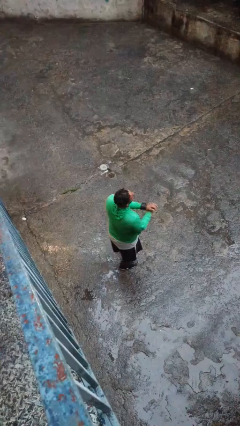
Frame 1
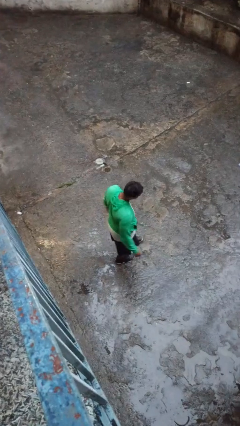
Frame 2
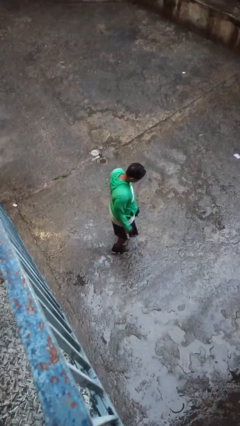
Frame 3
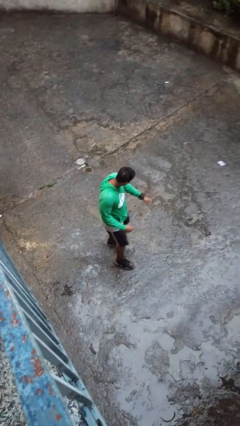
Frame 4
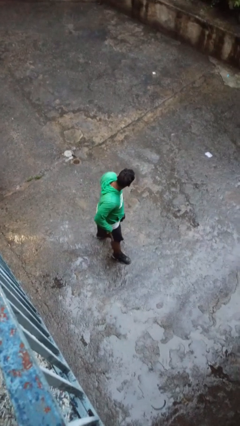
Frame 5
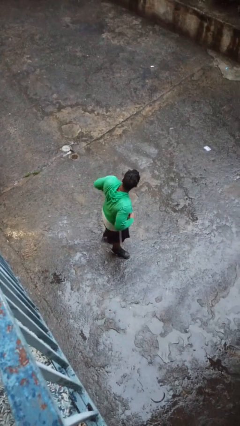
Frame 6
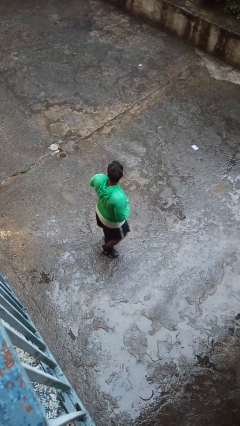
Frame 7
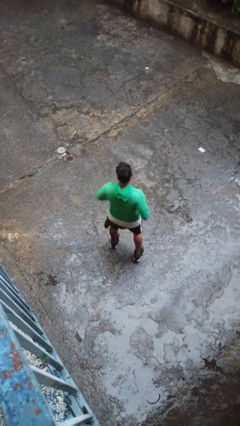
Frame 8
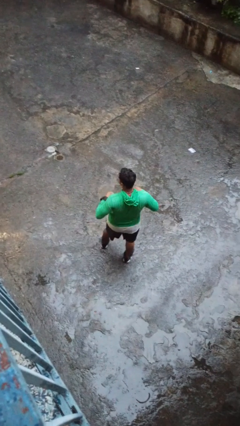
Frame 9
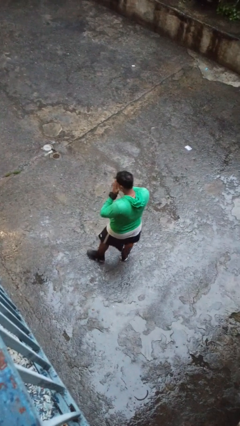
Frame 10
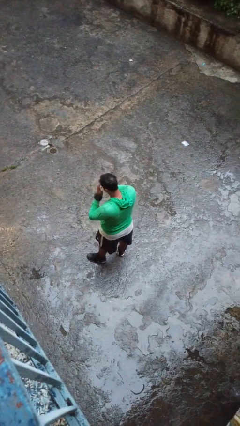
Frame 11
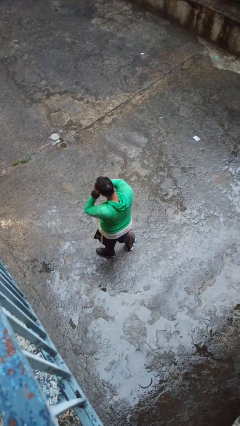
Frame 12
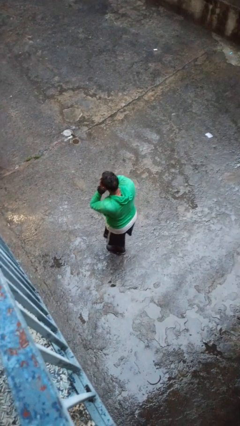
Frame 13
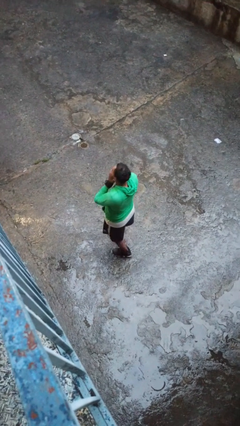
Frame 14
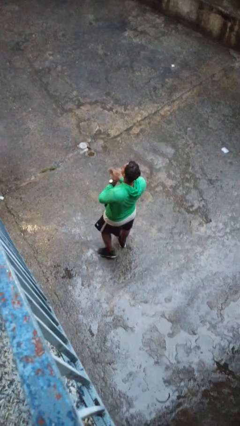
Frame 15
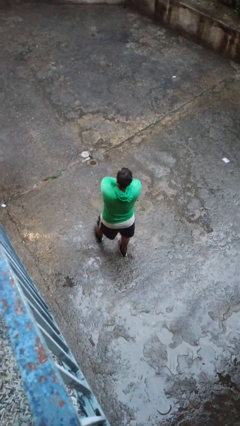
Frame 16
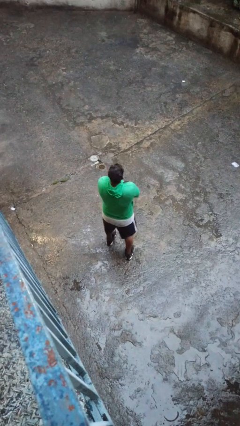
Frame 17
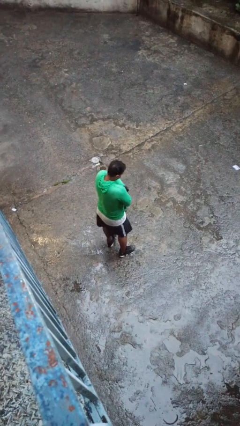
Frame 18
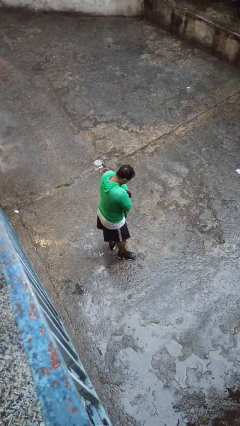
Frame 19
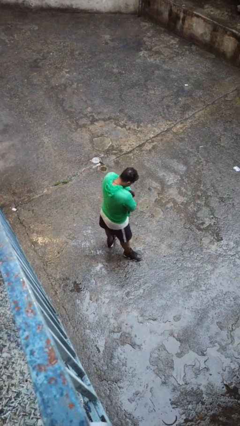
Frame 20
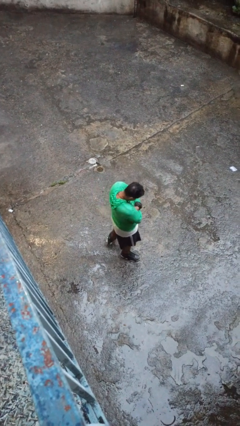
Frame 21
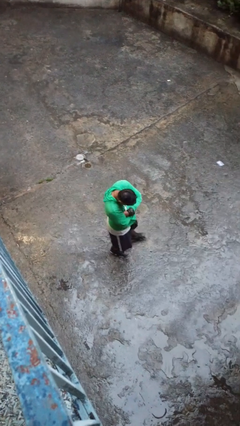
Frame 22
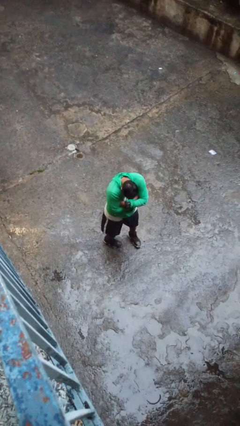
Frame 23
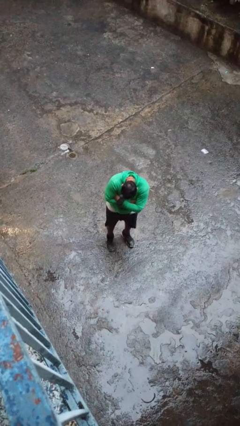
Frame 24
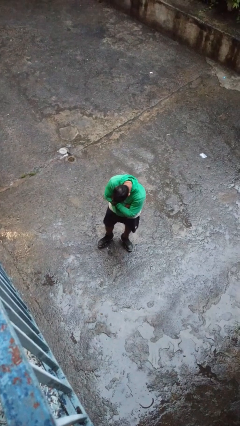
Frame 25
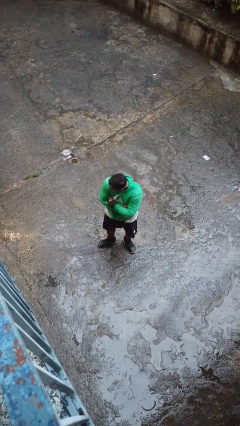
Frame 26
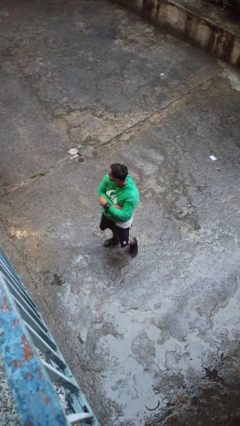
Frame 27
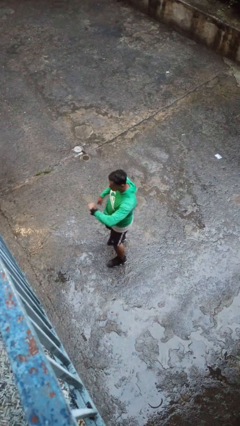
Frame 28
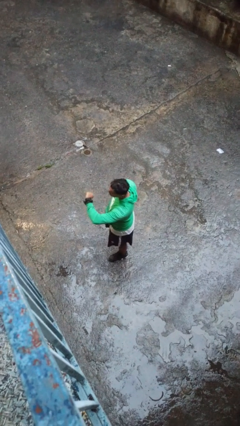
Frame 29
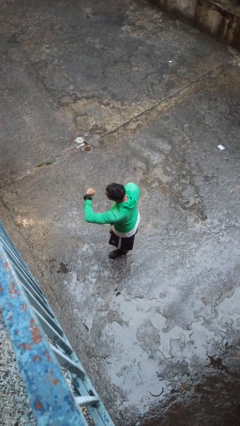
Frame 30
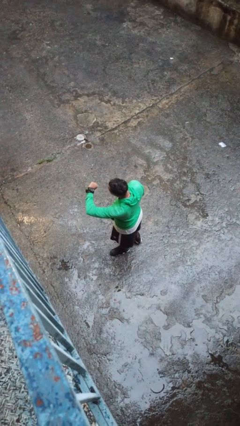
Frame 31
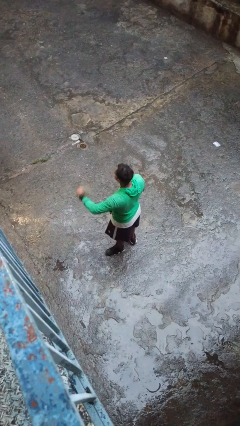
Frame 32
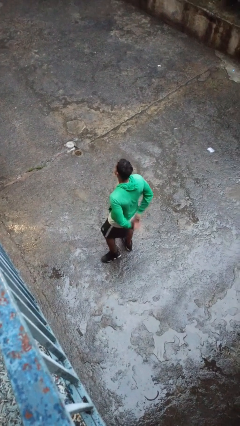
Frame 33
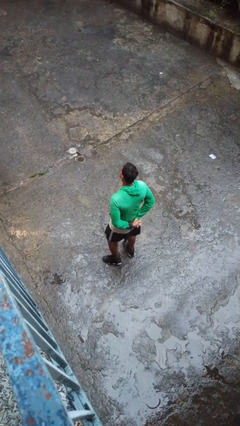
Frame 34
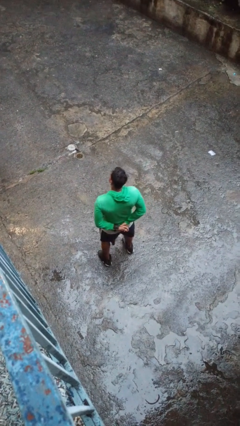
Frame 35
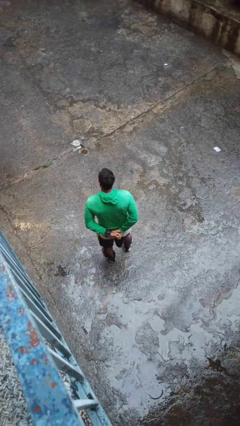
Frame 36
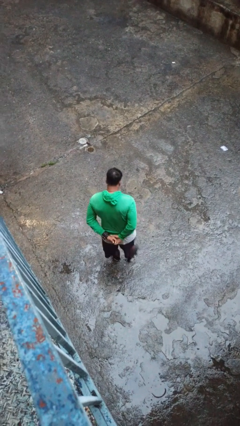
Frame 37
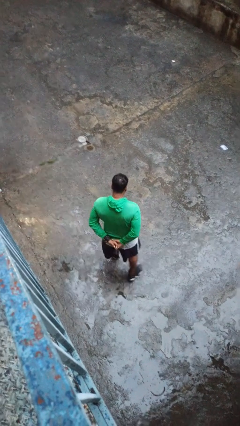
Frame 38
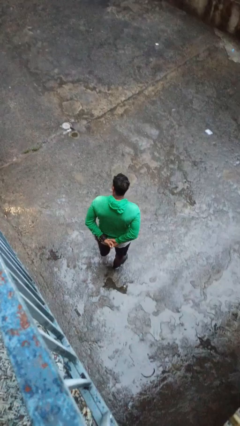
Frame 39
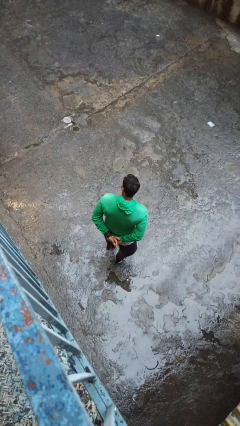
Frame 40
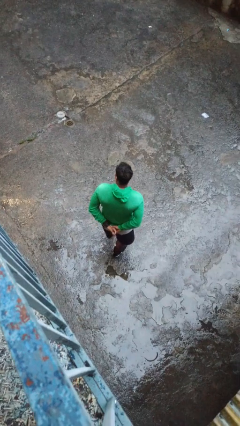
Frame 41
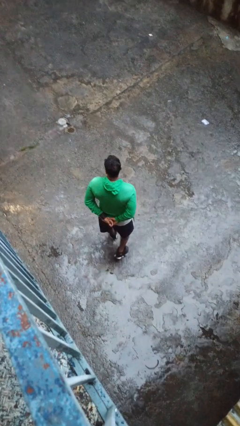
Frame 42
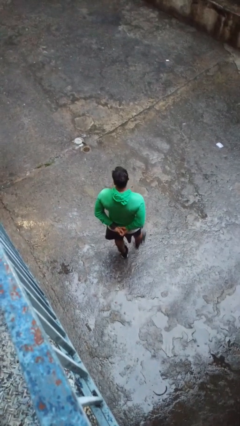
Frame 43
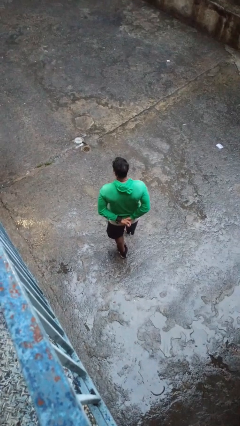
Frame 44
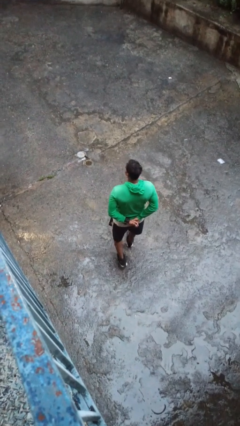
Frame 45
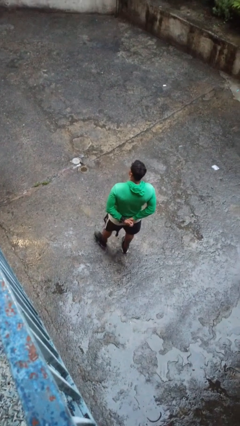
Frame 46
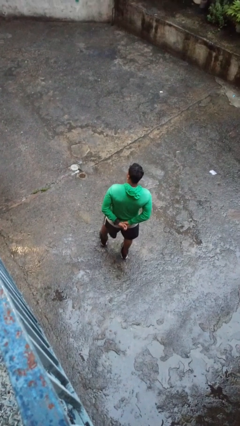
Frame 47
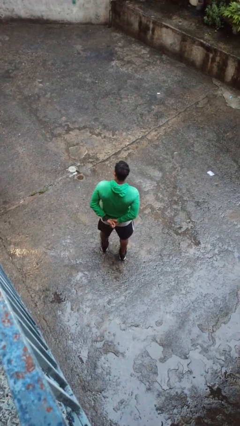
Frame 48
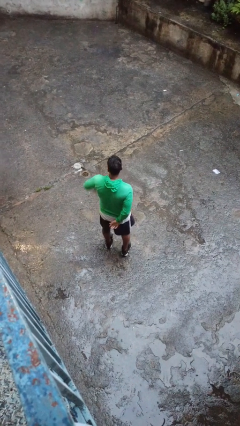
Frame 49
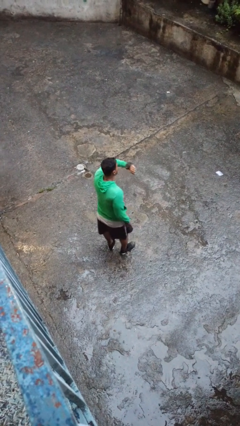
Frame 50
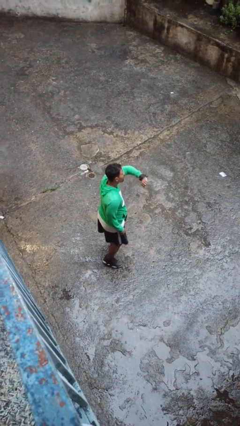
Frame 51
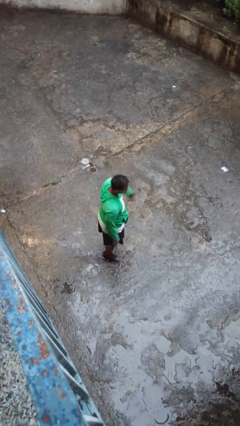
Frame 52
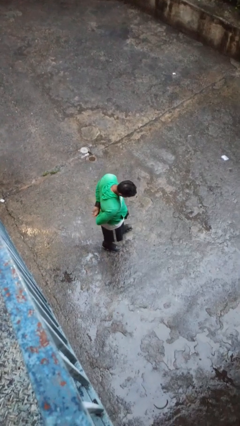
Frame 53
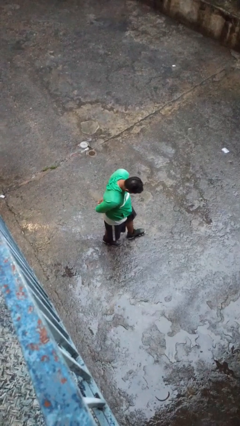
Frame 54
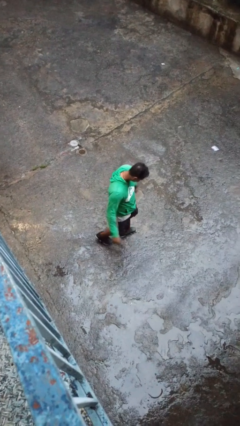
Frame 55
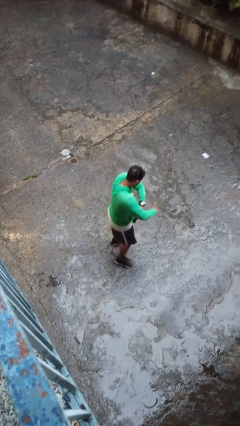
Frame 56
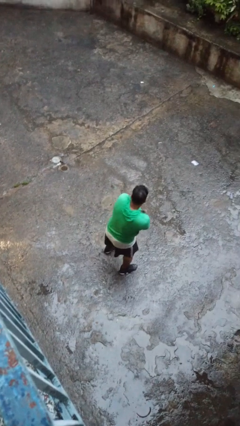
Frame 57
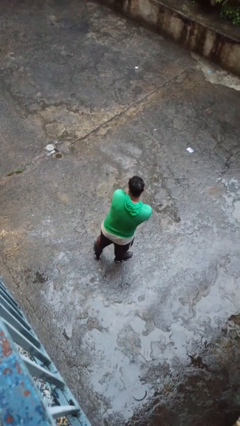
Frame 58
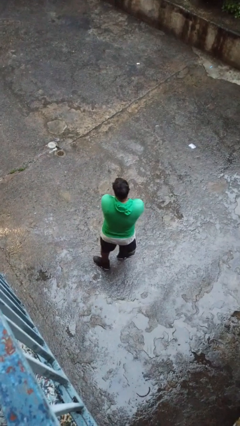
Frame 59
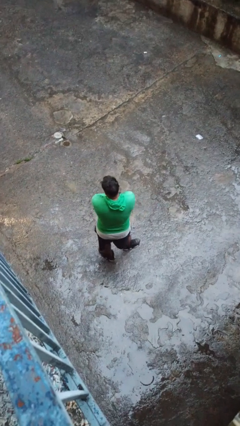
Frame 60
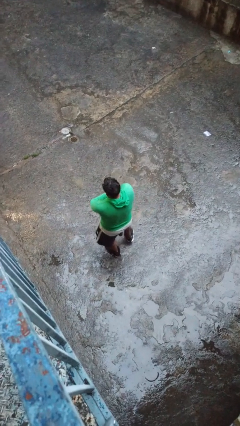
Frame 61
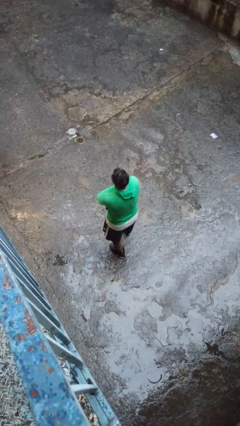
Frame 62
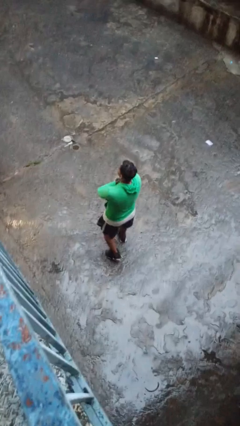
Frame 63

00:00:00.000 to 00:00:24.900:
person walks

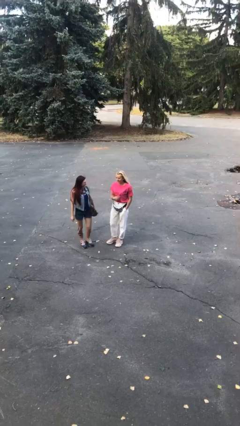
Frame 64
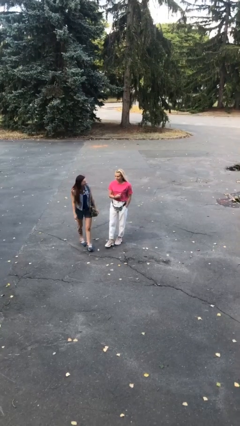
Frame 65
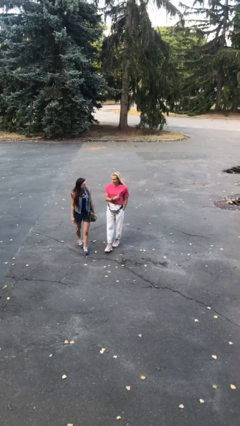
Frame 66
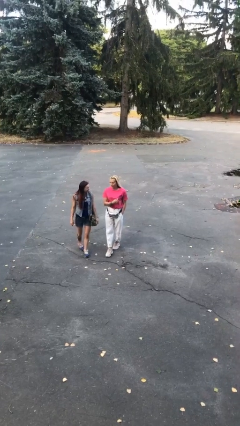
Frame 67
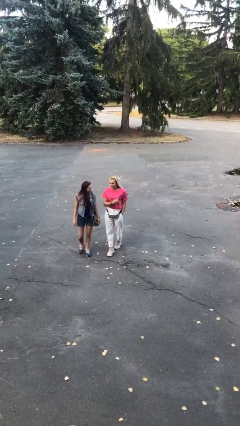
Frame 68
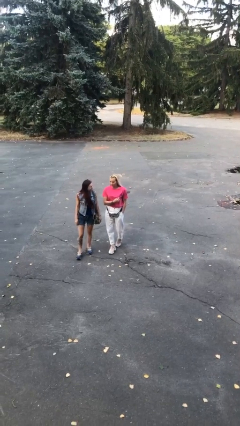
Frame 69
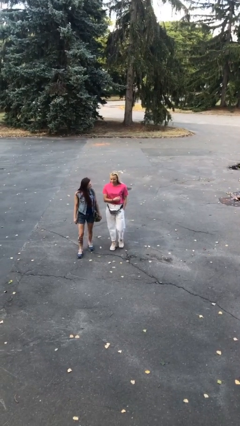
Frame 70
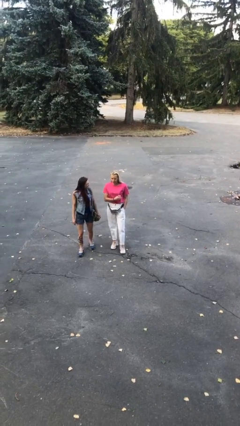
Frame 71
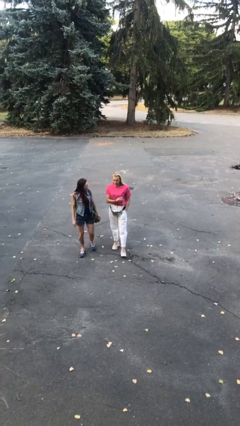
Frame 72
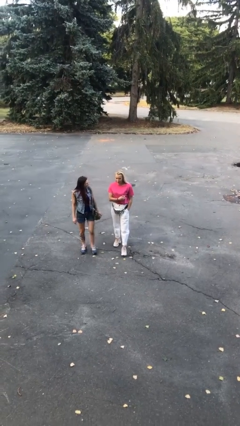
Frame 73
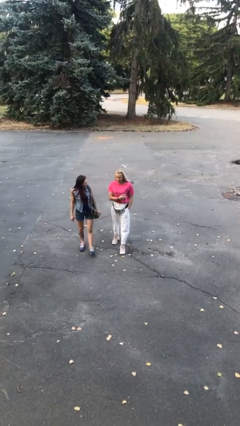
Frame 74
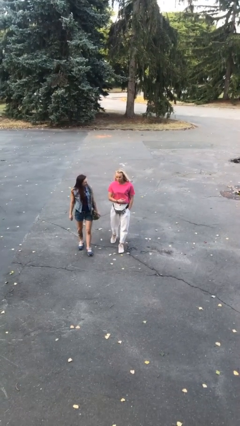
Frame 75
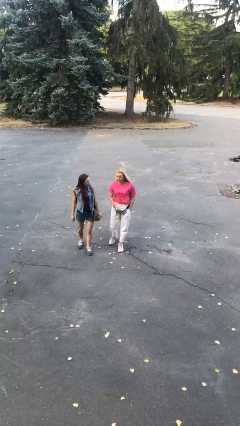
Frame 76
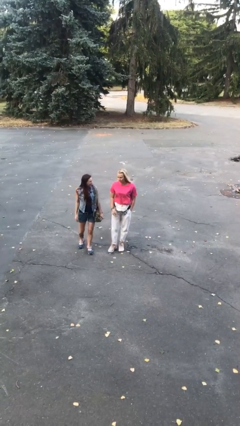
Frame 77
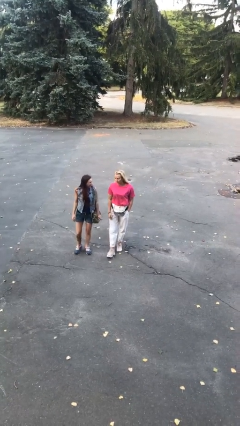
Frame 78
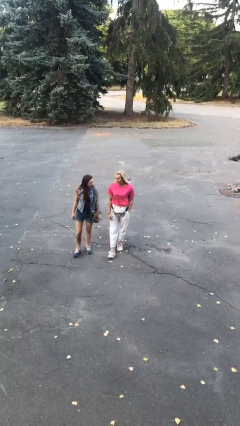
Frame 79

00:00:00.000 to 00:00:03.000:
person talks to person

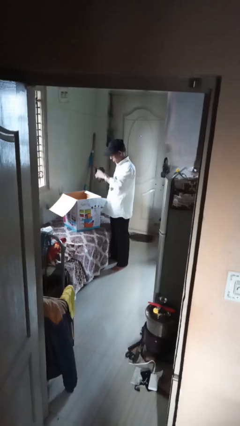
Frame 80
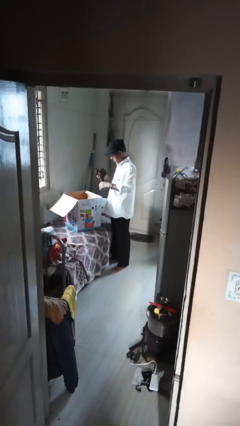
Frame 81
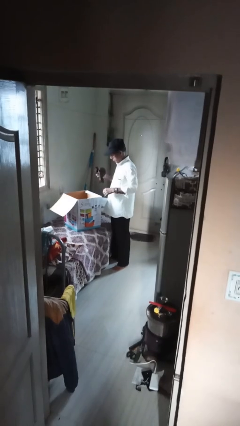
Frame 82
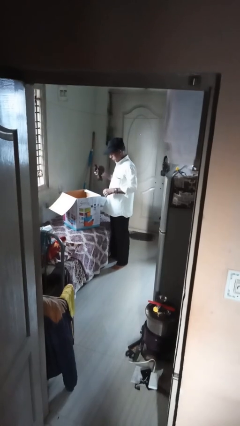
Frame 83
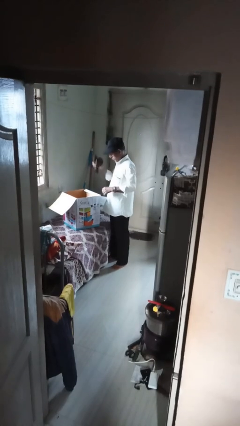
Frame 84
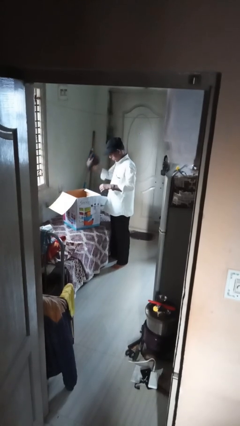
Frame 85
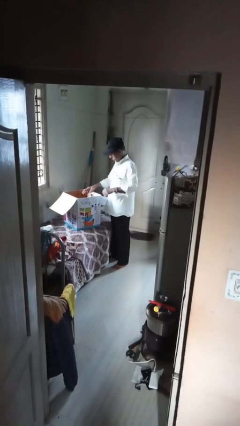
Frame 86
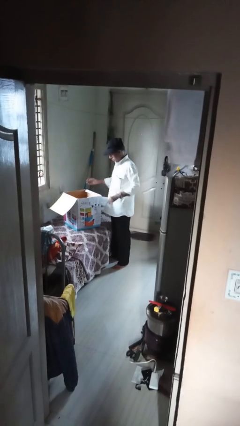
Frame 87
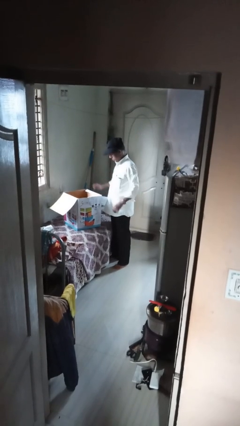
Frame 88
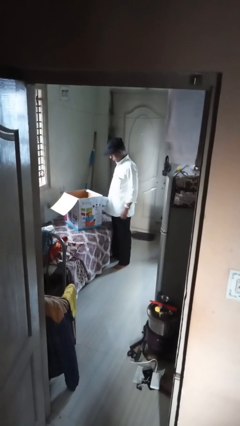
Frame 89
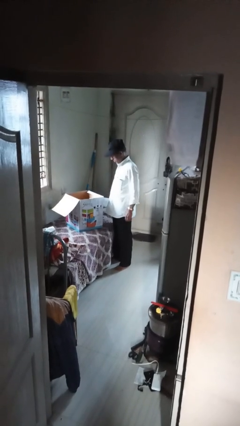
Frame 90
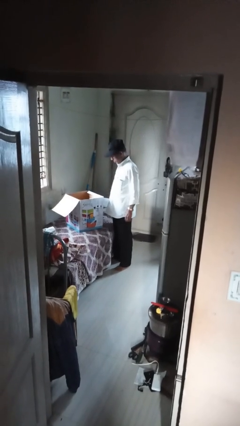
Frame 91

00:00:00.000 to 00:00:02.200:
person puts object into box
